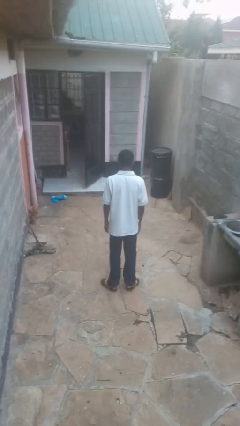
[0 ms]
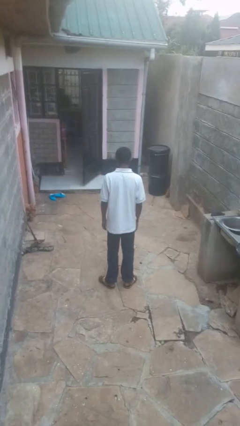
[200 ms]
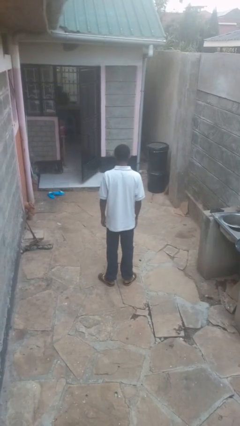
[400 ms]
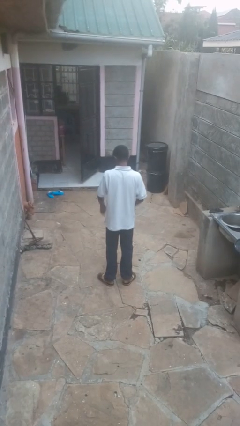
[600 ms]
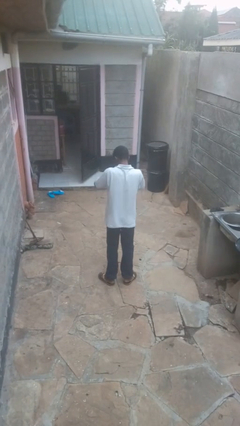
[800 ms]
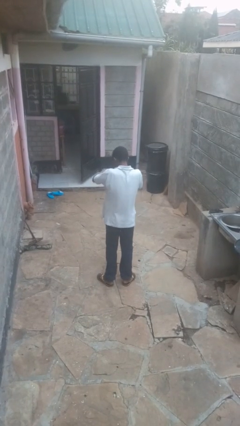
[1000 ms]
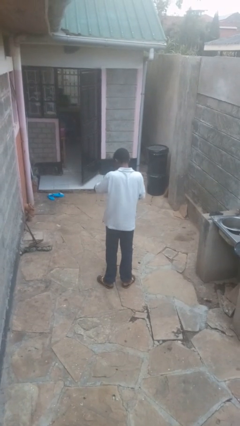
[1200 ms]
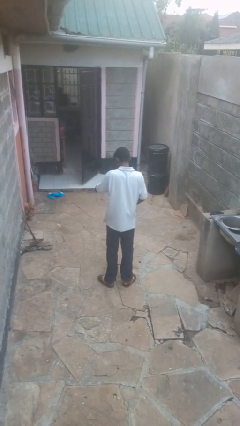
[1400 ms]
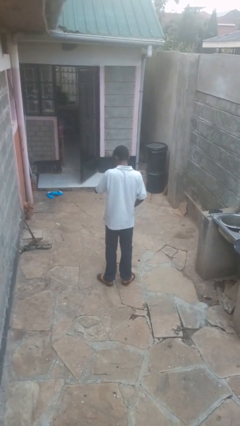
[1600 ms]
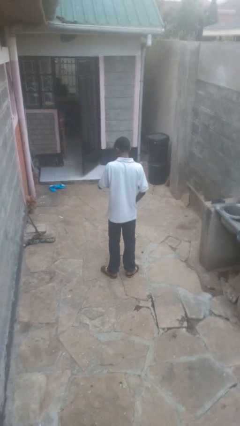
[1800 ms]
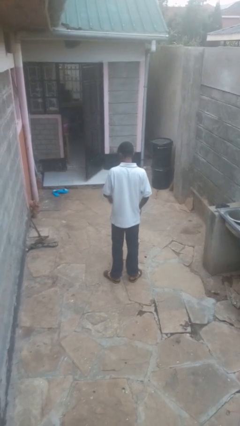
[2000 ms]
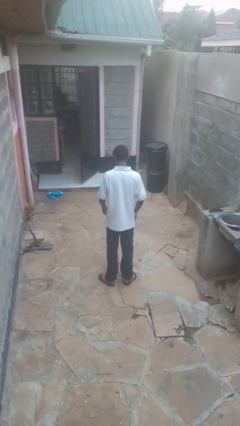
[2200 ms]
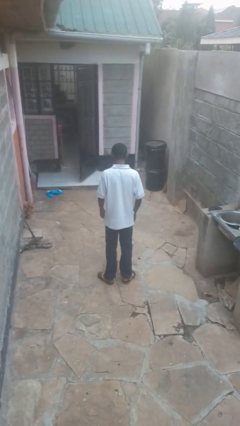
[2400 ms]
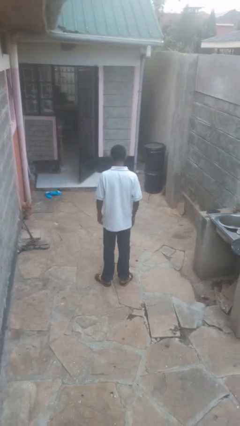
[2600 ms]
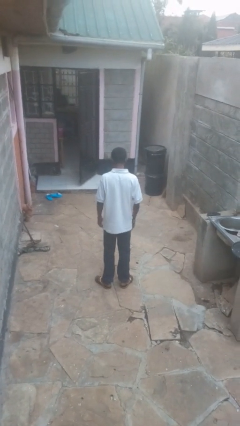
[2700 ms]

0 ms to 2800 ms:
person swats bug

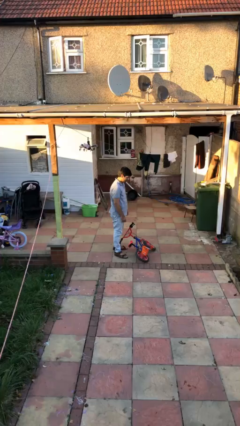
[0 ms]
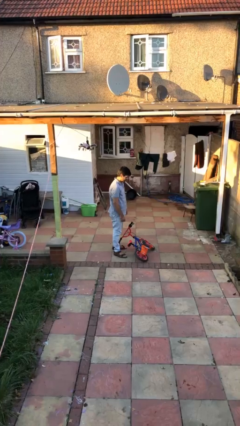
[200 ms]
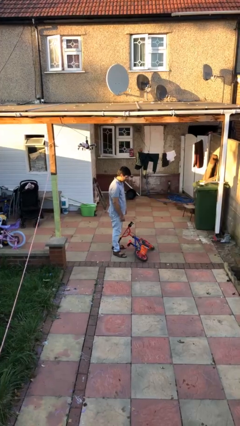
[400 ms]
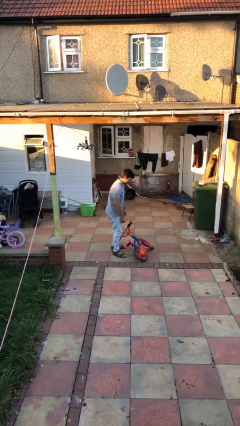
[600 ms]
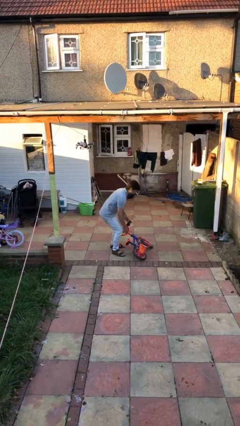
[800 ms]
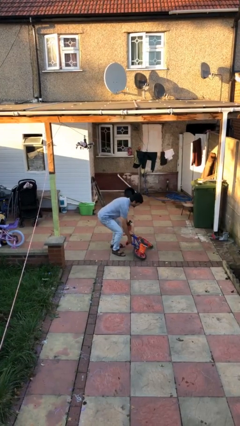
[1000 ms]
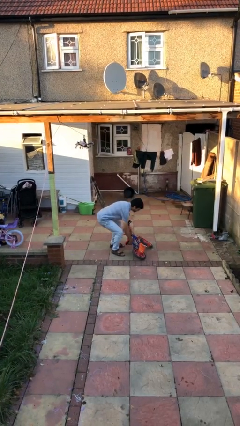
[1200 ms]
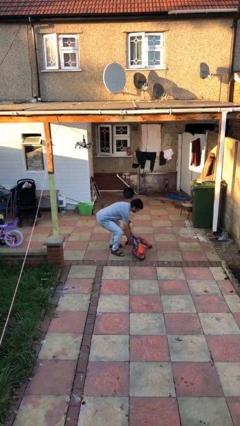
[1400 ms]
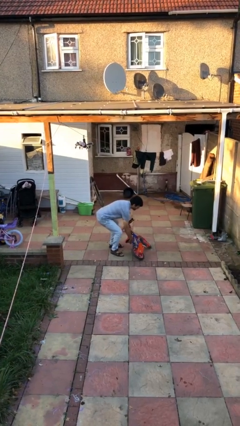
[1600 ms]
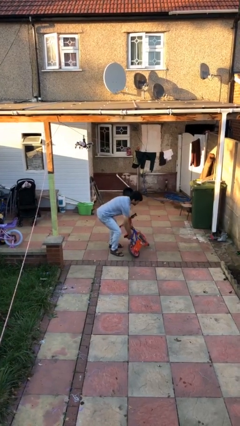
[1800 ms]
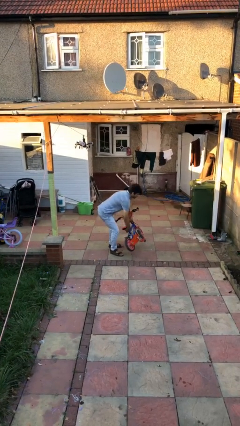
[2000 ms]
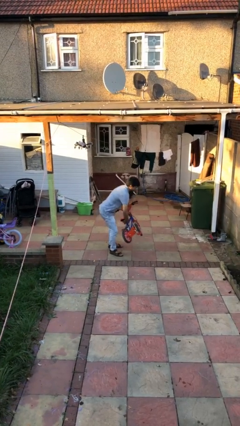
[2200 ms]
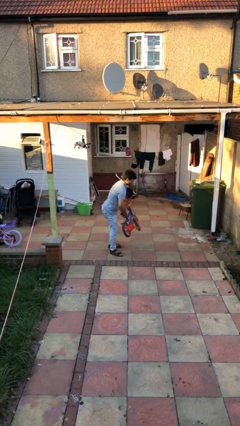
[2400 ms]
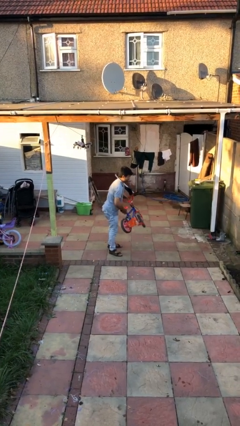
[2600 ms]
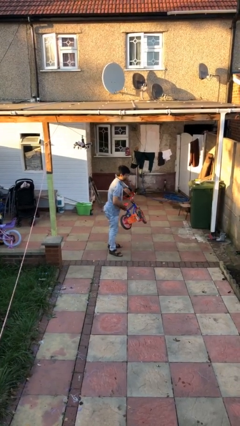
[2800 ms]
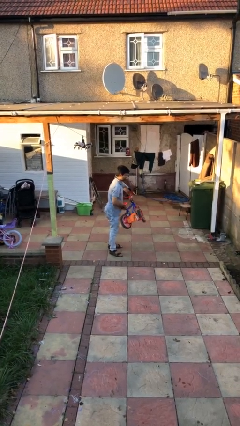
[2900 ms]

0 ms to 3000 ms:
person picks up object from floor

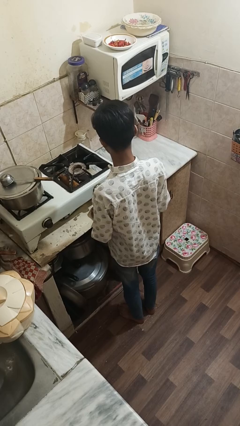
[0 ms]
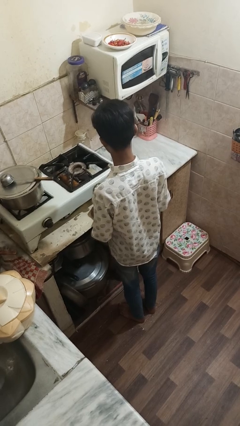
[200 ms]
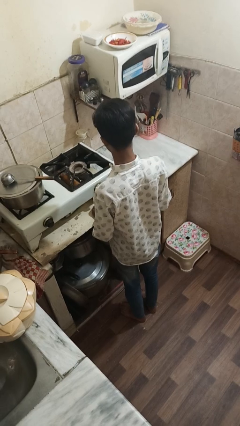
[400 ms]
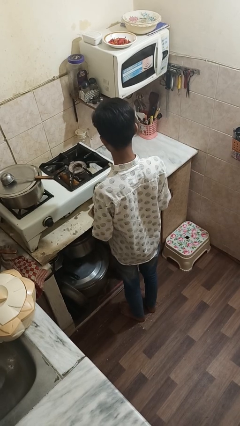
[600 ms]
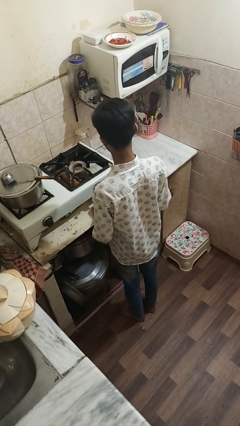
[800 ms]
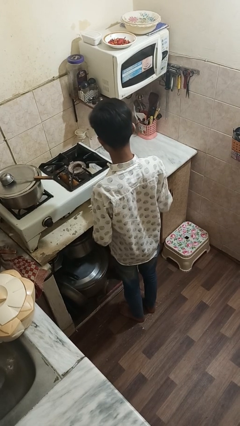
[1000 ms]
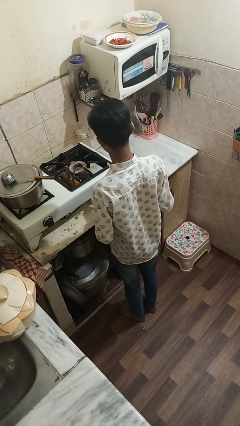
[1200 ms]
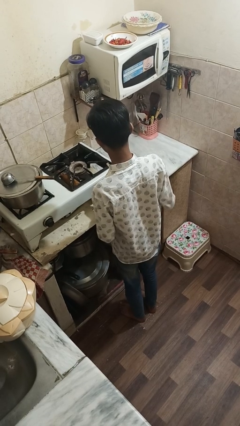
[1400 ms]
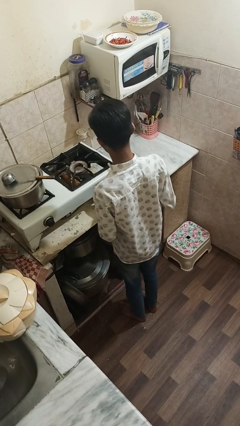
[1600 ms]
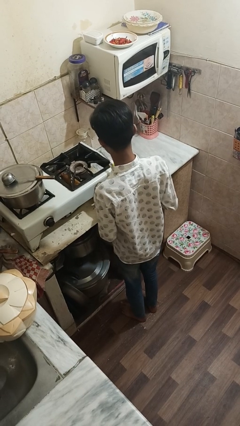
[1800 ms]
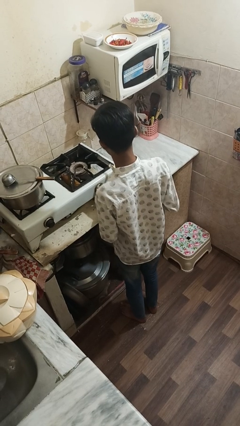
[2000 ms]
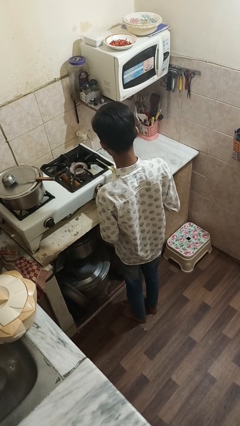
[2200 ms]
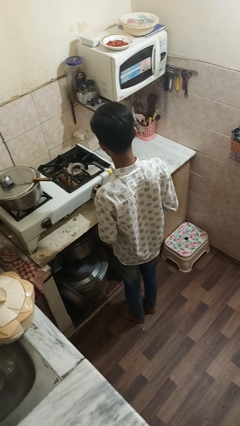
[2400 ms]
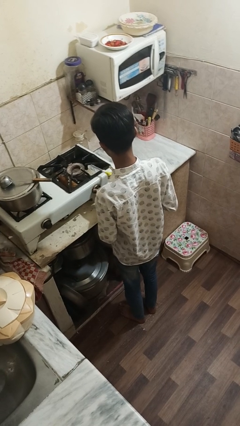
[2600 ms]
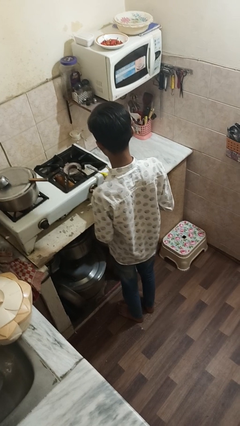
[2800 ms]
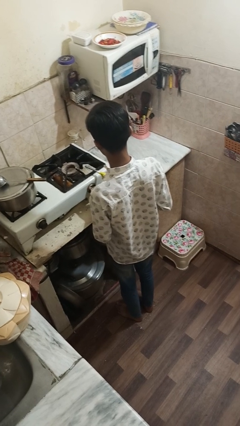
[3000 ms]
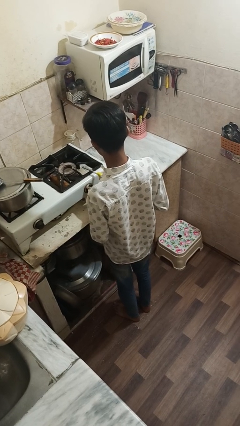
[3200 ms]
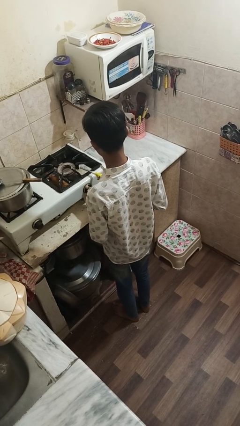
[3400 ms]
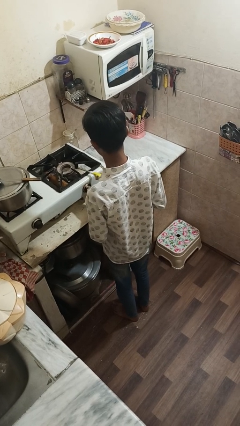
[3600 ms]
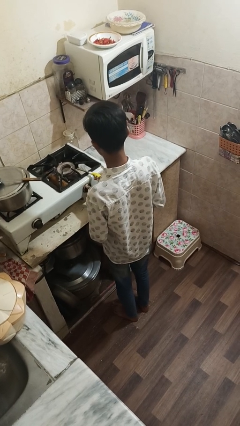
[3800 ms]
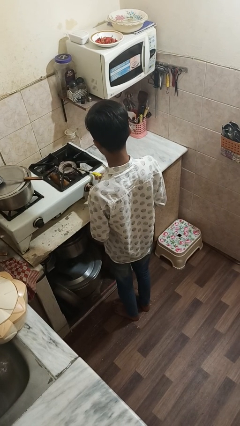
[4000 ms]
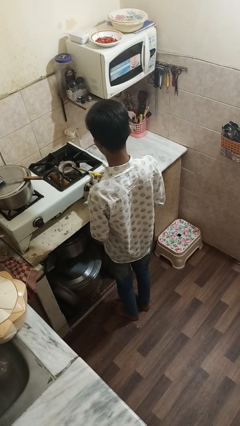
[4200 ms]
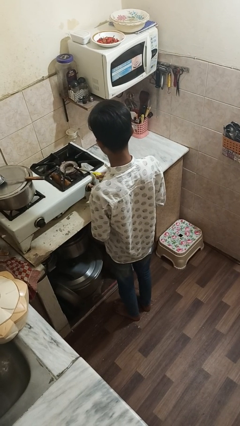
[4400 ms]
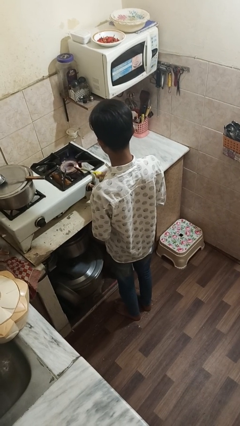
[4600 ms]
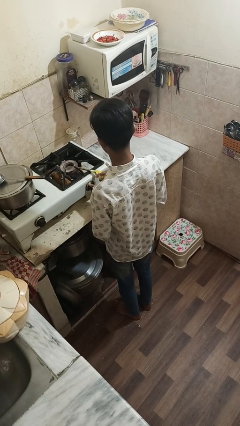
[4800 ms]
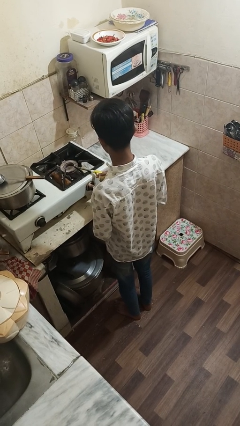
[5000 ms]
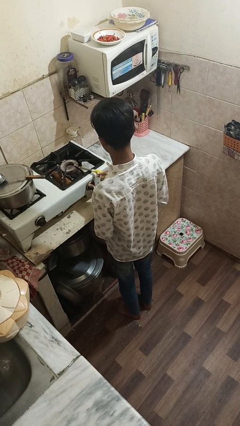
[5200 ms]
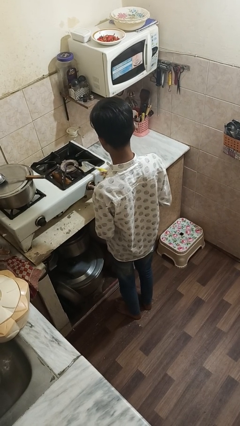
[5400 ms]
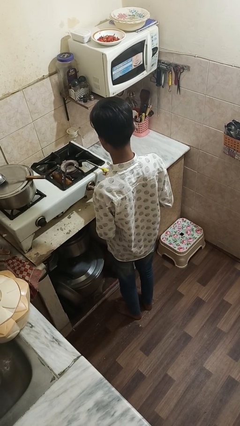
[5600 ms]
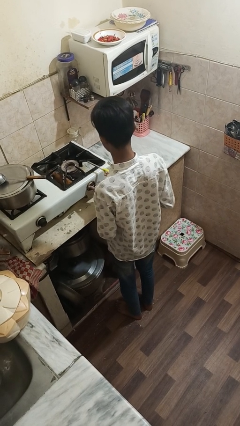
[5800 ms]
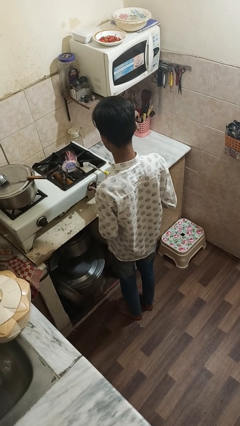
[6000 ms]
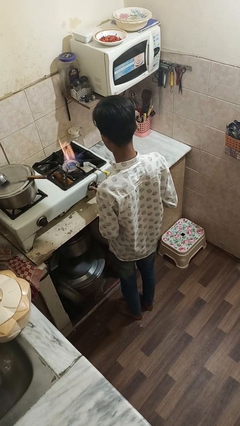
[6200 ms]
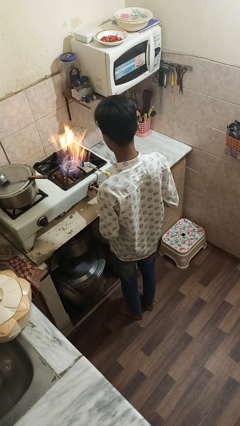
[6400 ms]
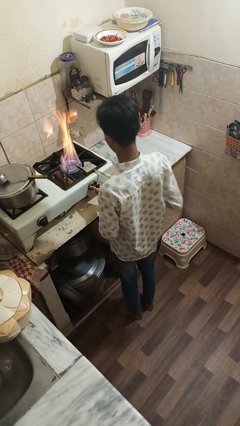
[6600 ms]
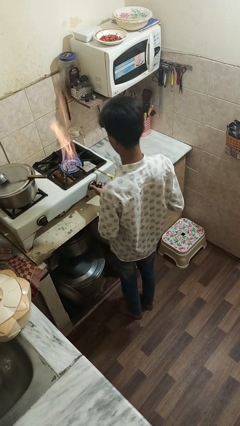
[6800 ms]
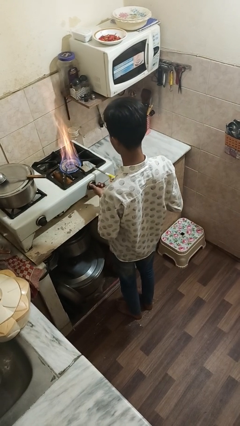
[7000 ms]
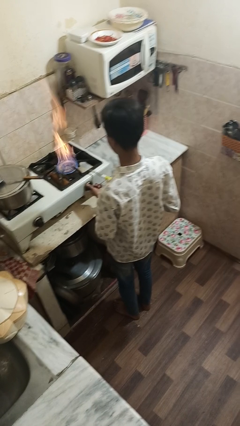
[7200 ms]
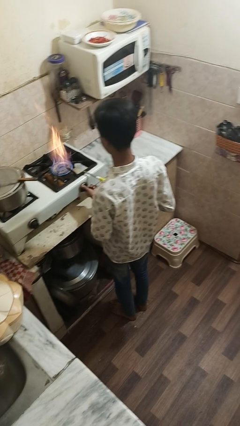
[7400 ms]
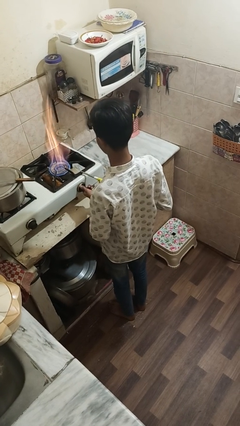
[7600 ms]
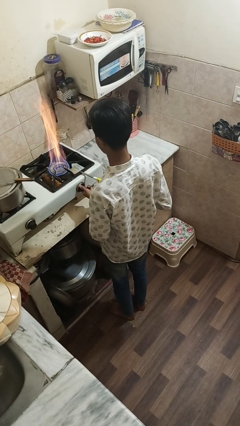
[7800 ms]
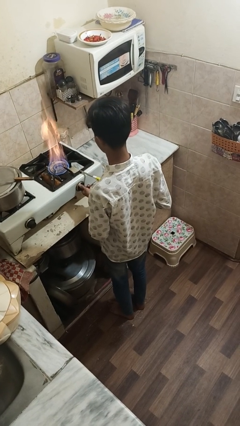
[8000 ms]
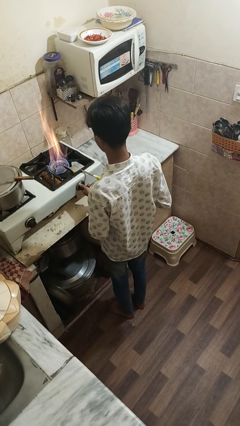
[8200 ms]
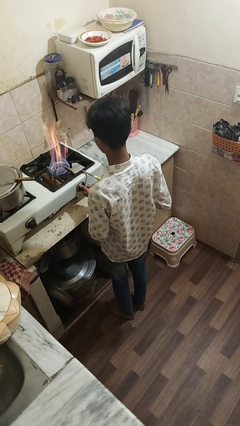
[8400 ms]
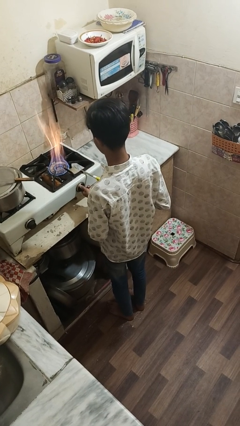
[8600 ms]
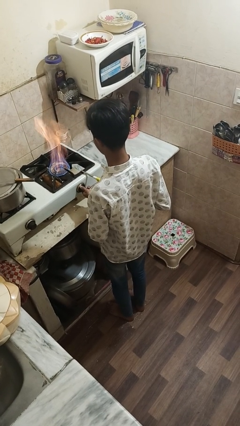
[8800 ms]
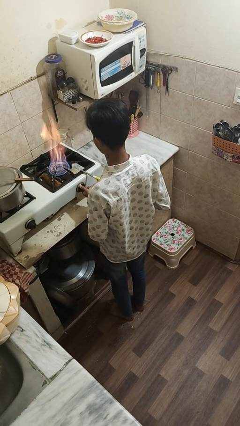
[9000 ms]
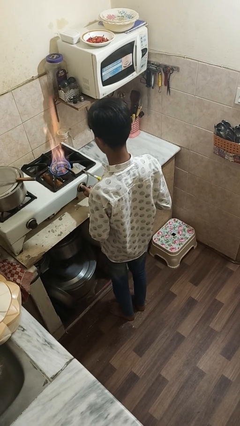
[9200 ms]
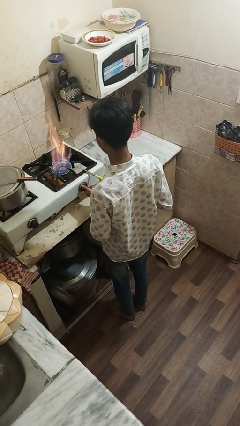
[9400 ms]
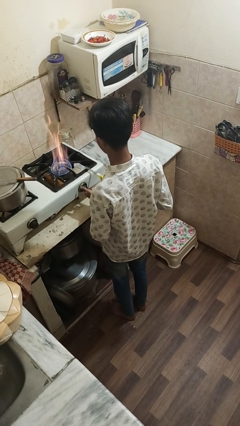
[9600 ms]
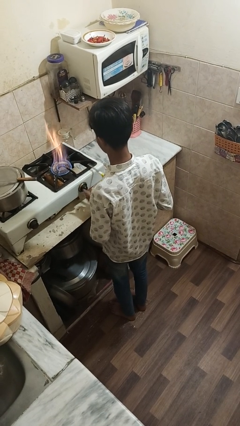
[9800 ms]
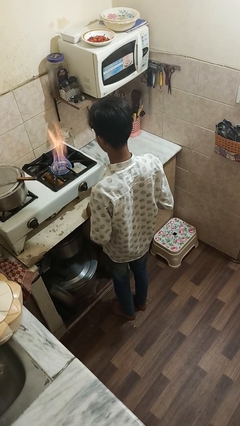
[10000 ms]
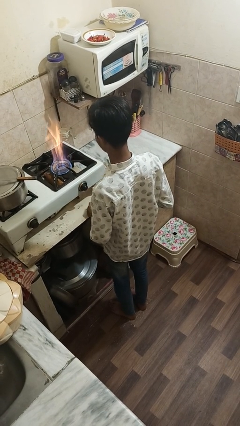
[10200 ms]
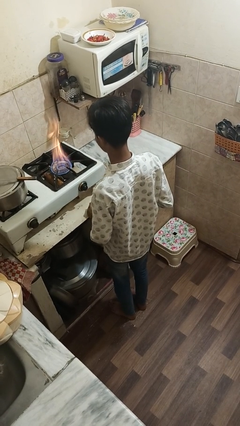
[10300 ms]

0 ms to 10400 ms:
person turns on stovetop

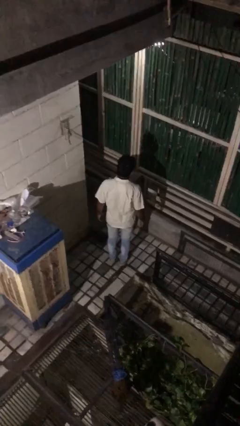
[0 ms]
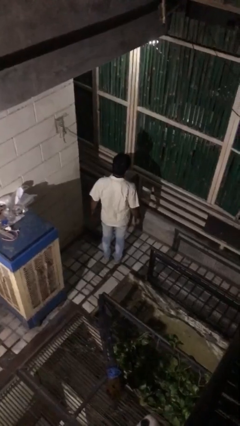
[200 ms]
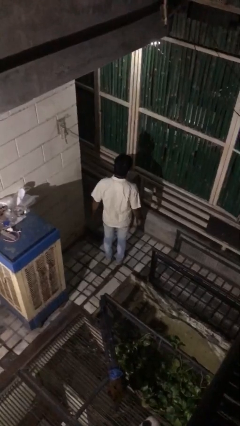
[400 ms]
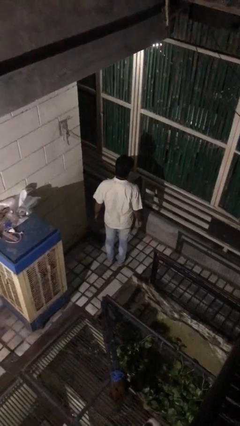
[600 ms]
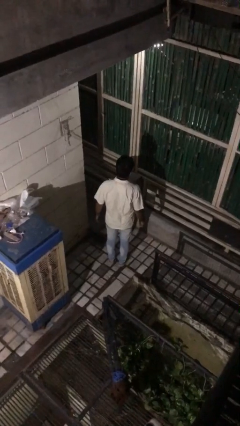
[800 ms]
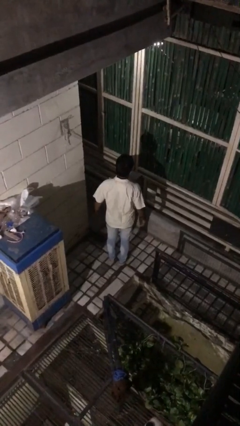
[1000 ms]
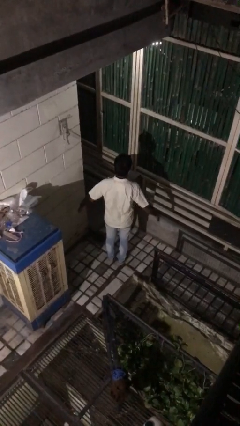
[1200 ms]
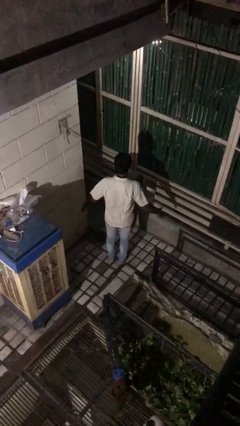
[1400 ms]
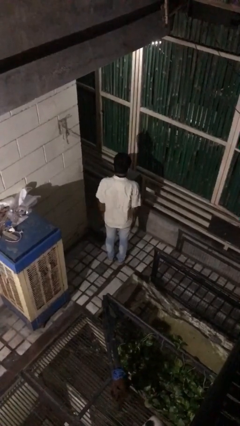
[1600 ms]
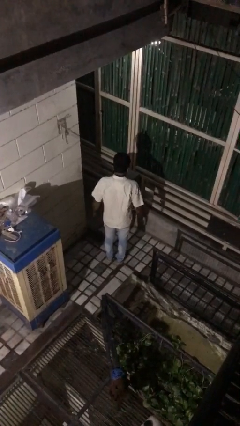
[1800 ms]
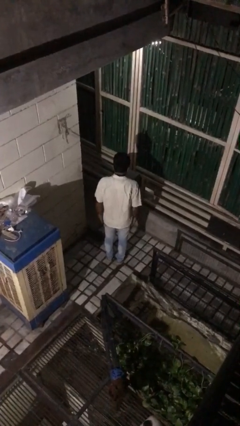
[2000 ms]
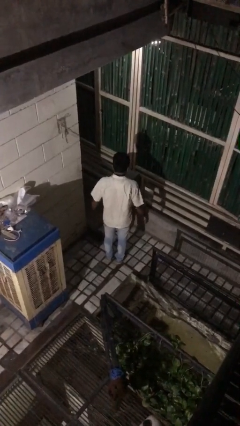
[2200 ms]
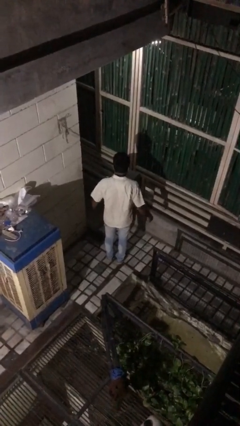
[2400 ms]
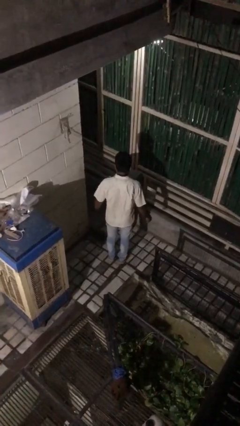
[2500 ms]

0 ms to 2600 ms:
person slaps hands on thighs
